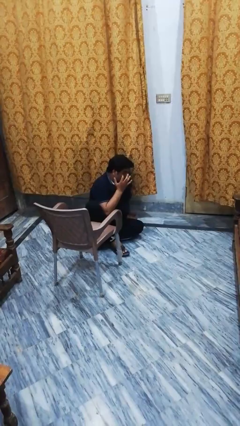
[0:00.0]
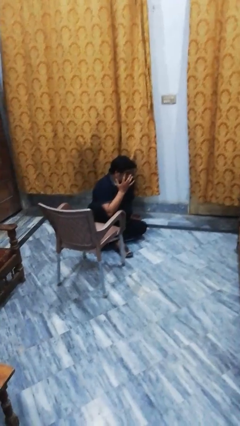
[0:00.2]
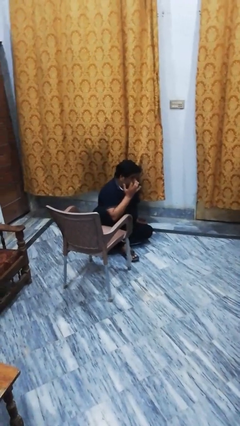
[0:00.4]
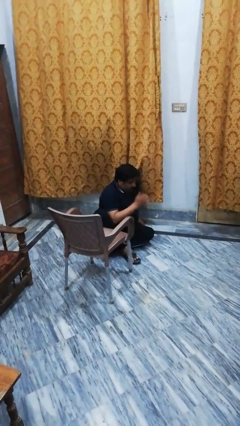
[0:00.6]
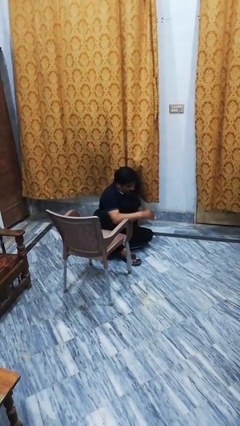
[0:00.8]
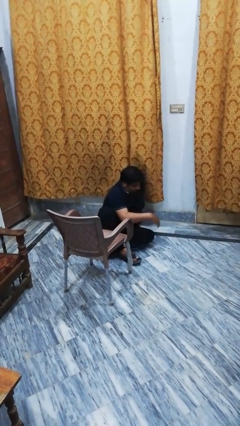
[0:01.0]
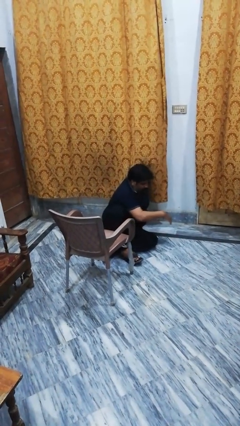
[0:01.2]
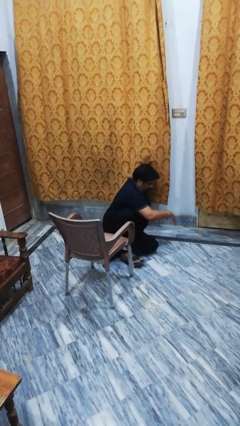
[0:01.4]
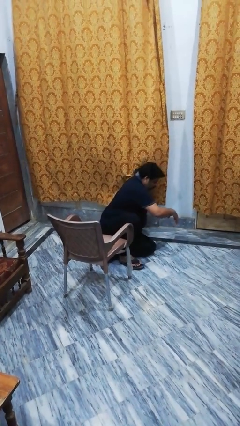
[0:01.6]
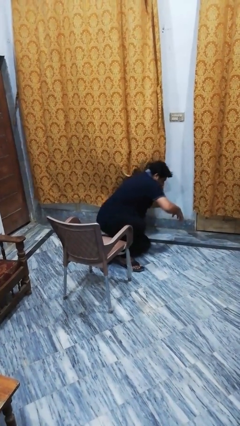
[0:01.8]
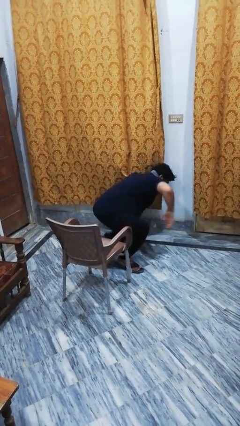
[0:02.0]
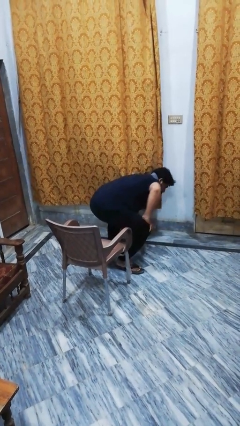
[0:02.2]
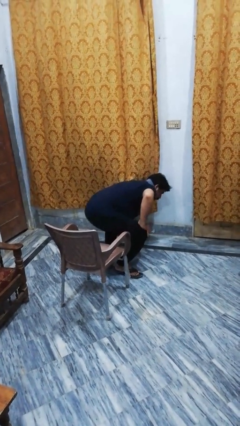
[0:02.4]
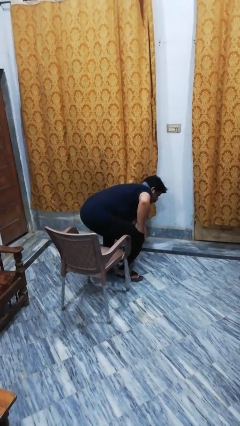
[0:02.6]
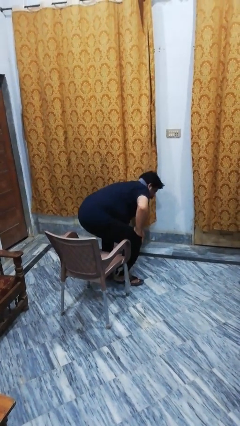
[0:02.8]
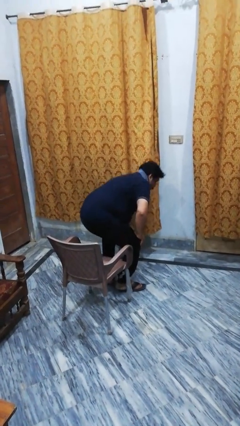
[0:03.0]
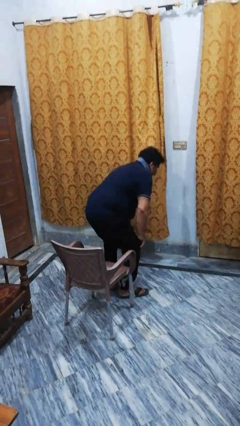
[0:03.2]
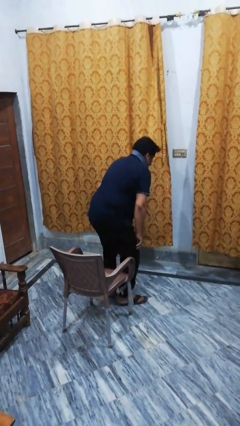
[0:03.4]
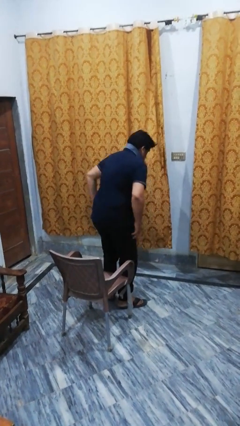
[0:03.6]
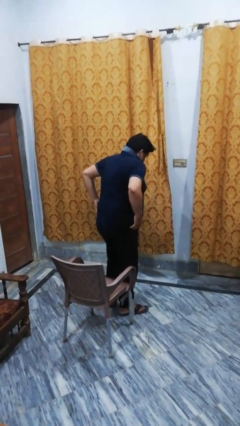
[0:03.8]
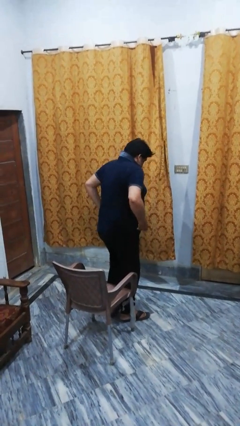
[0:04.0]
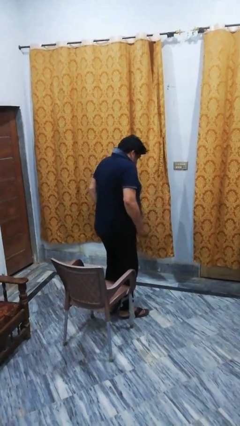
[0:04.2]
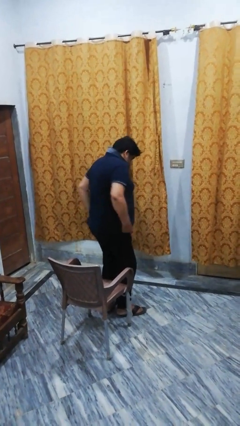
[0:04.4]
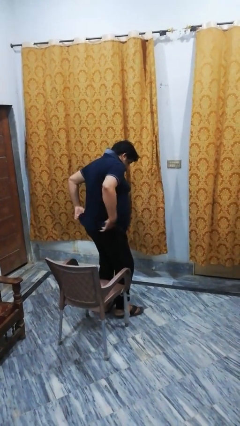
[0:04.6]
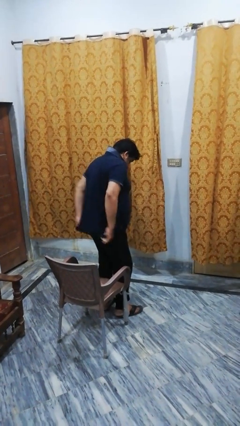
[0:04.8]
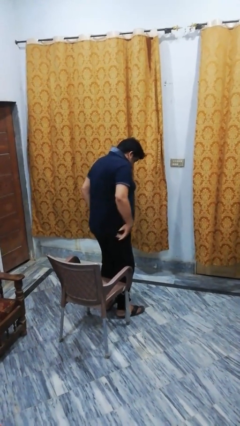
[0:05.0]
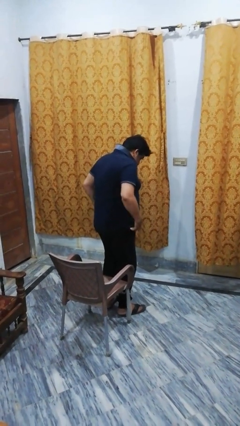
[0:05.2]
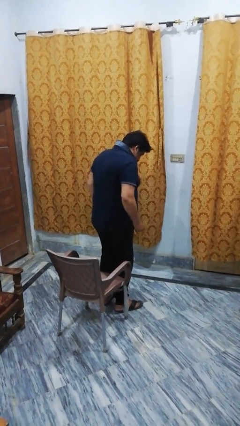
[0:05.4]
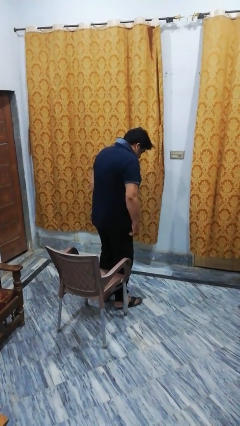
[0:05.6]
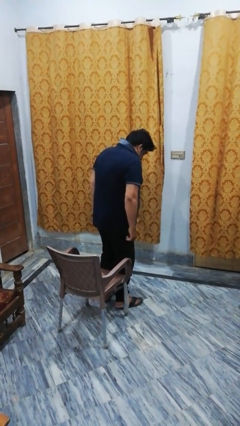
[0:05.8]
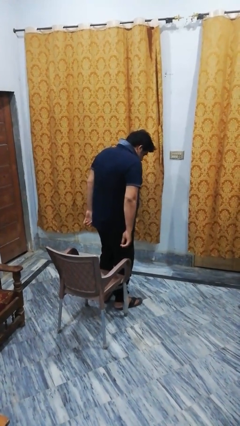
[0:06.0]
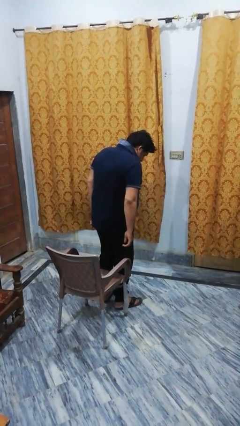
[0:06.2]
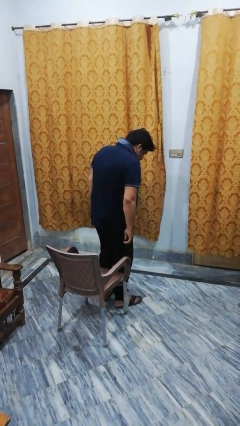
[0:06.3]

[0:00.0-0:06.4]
person stands up from floor

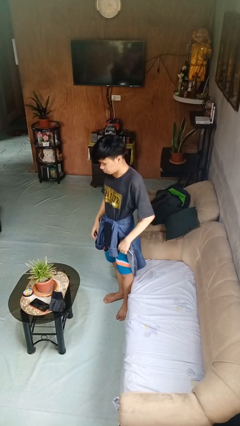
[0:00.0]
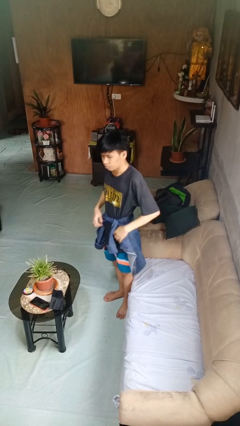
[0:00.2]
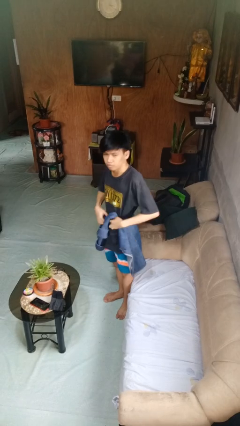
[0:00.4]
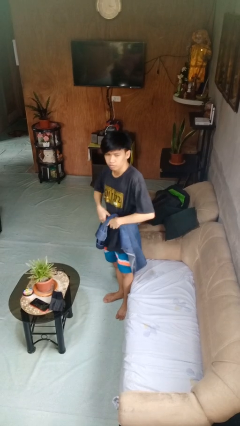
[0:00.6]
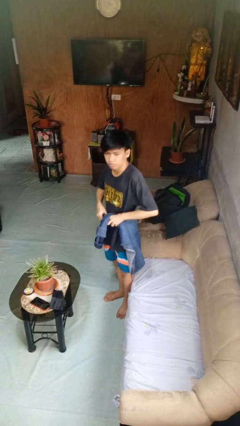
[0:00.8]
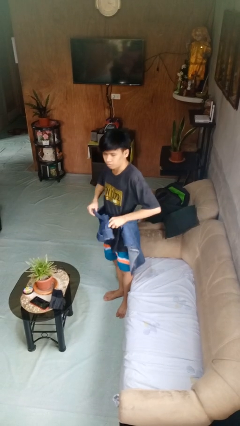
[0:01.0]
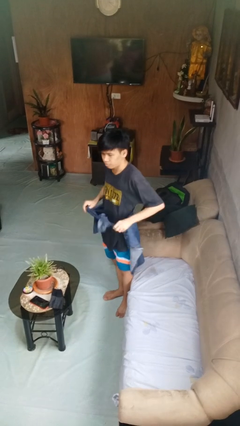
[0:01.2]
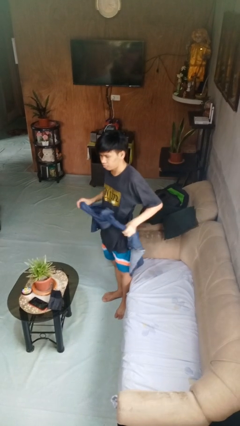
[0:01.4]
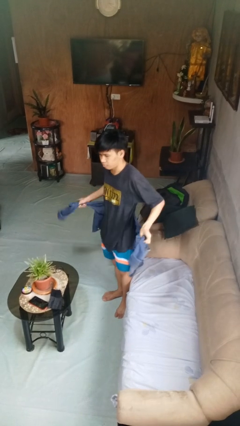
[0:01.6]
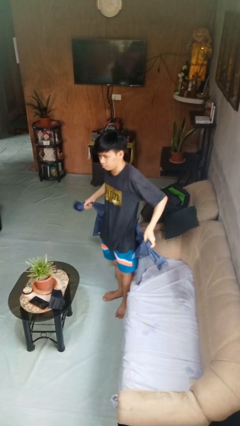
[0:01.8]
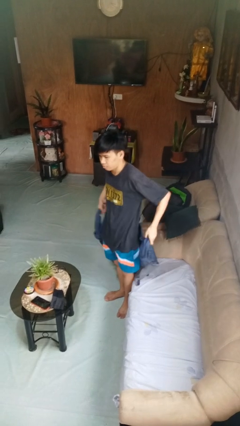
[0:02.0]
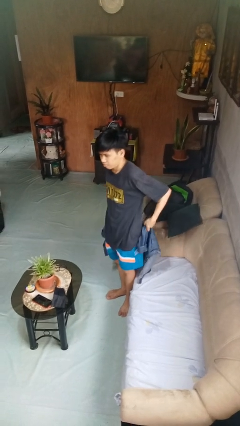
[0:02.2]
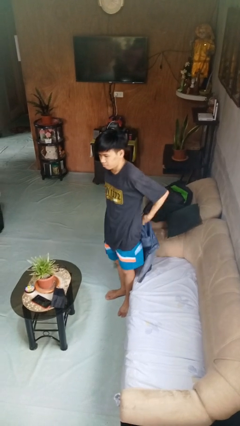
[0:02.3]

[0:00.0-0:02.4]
person unties jacket around waist

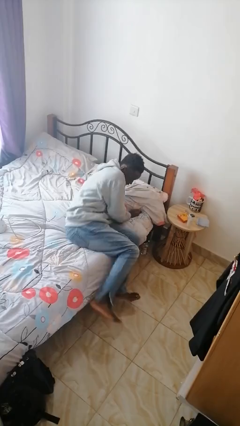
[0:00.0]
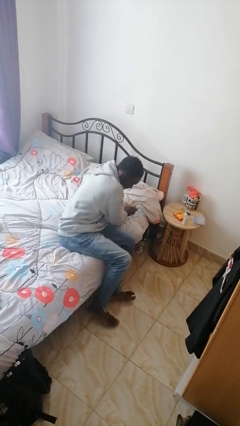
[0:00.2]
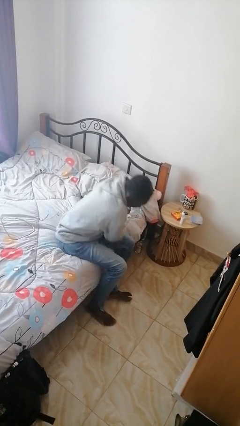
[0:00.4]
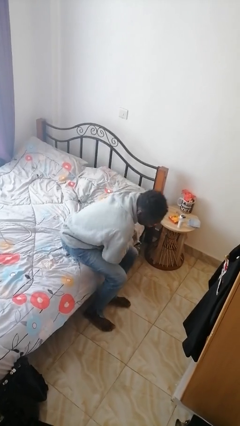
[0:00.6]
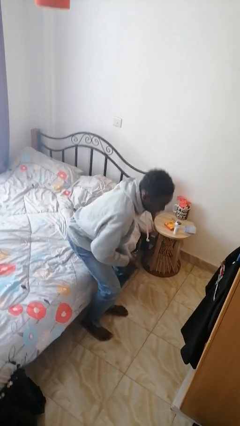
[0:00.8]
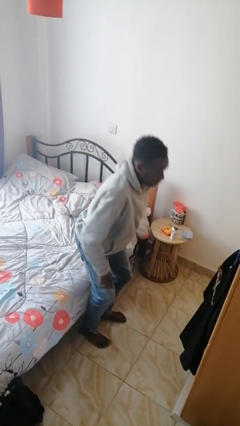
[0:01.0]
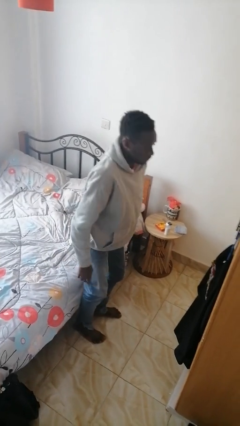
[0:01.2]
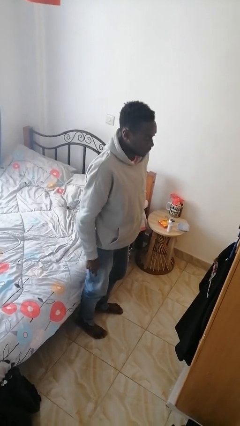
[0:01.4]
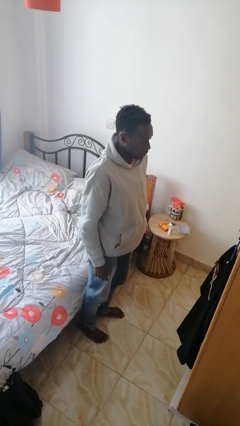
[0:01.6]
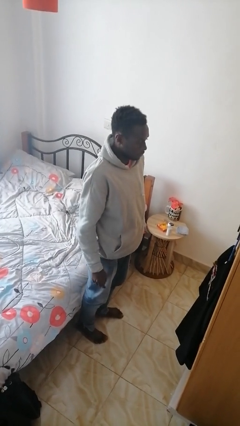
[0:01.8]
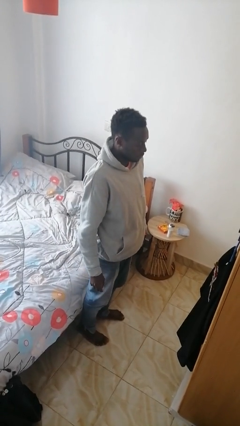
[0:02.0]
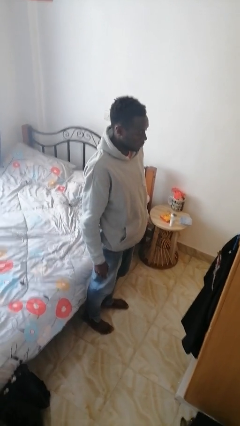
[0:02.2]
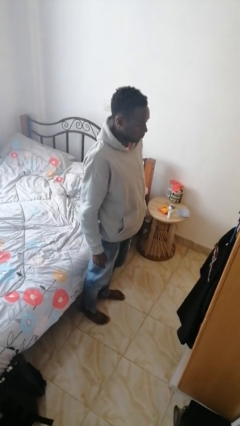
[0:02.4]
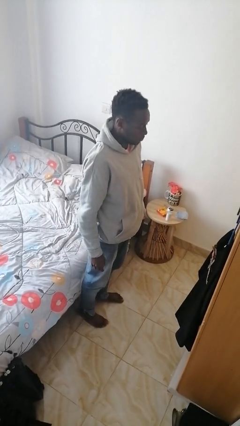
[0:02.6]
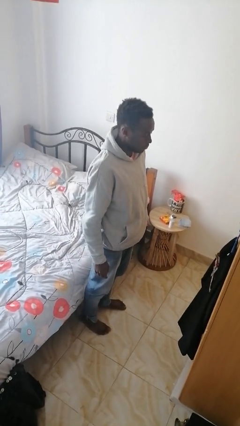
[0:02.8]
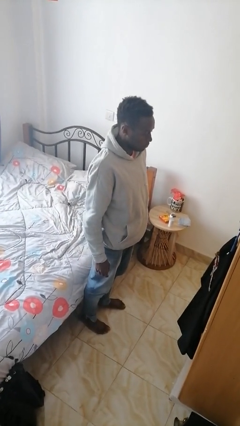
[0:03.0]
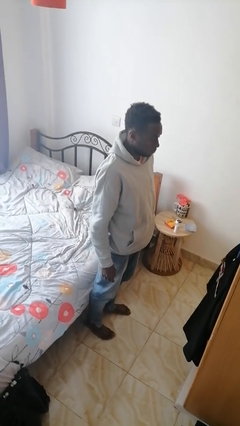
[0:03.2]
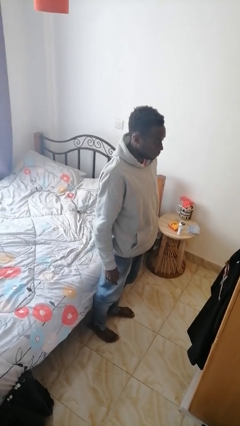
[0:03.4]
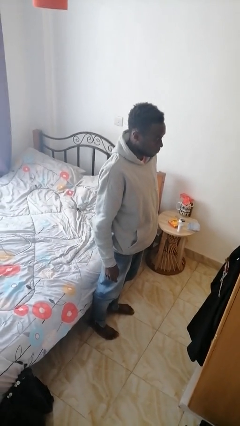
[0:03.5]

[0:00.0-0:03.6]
person stands up

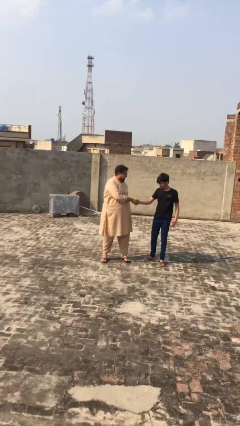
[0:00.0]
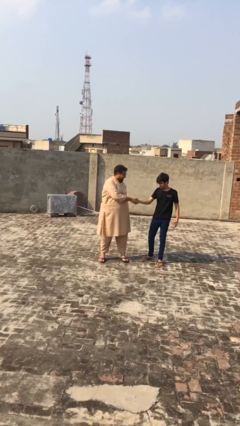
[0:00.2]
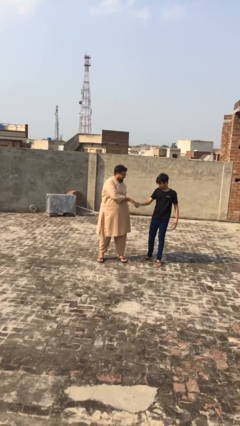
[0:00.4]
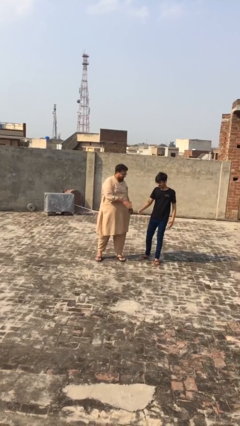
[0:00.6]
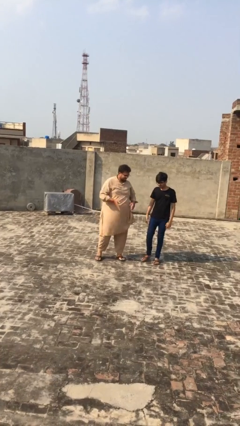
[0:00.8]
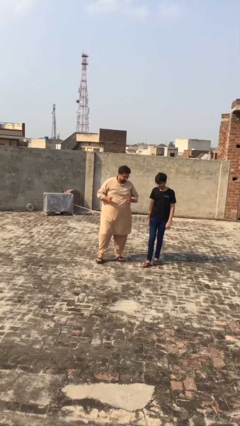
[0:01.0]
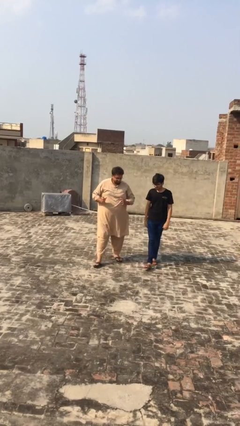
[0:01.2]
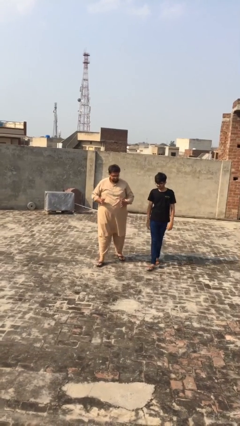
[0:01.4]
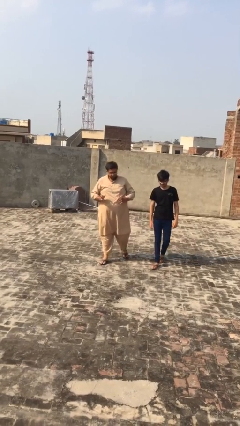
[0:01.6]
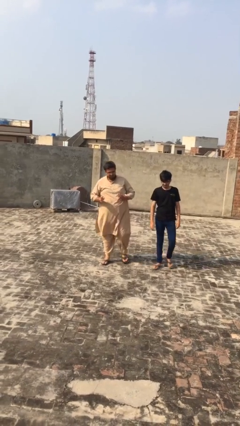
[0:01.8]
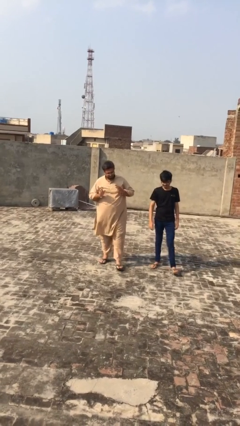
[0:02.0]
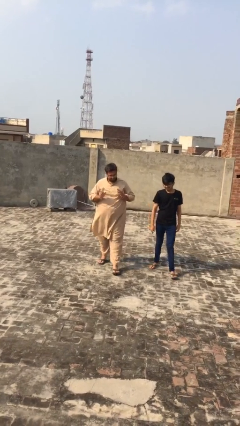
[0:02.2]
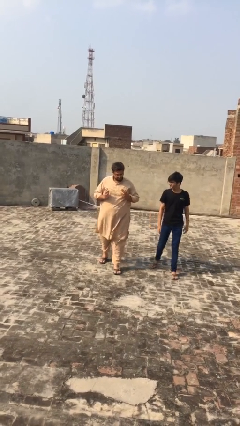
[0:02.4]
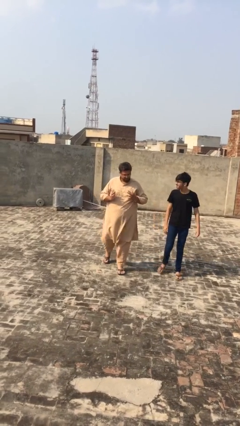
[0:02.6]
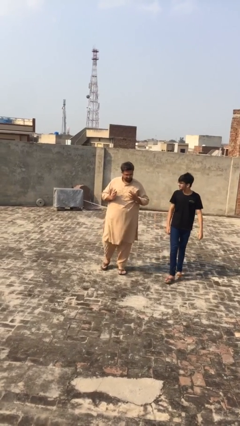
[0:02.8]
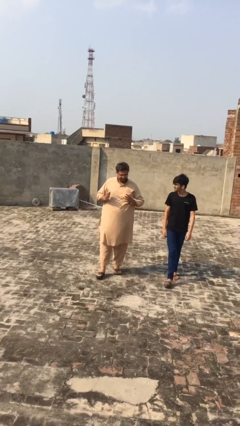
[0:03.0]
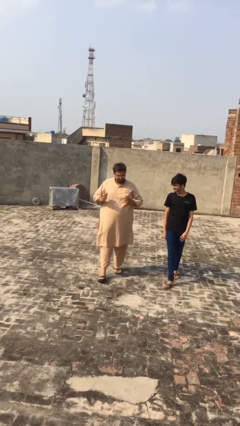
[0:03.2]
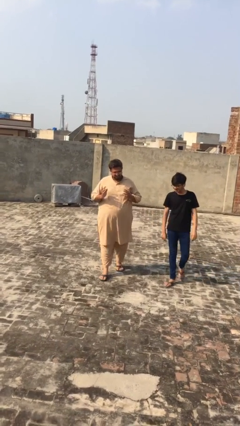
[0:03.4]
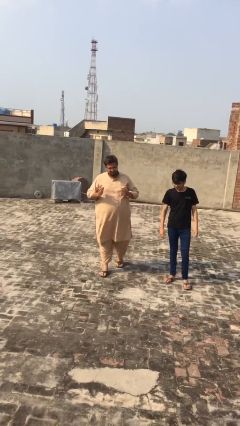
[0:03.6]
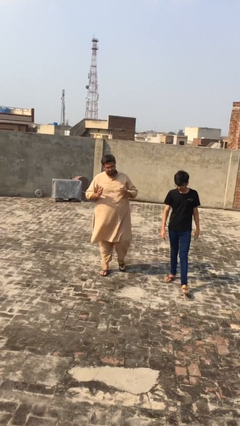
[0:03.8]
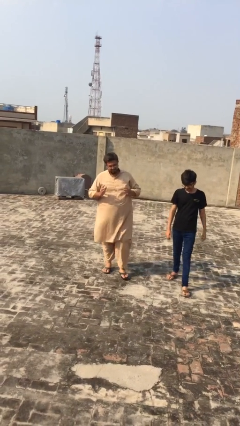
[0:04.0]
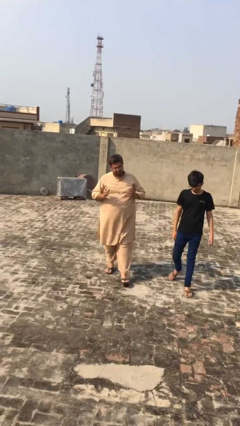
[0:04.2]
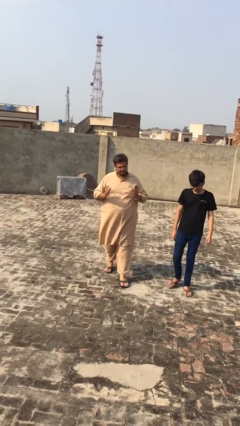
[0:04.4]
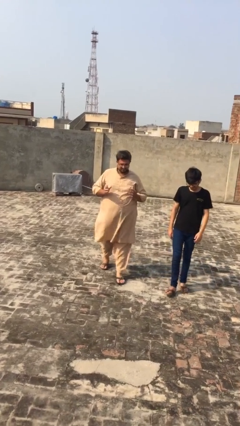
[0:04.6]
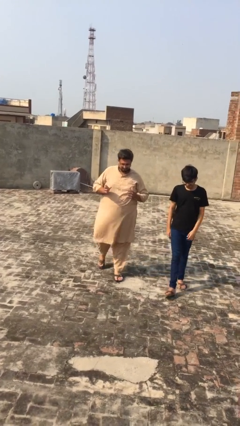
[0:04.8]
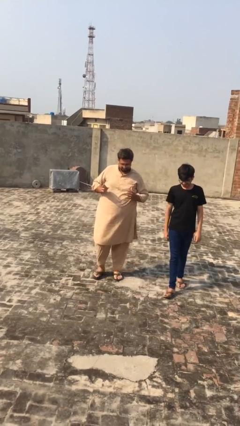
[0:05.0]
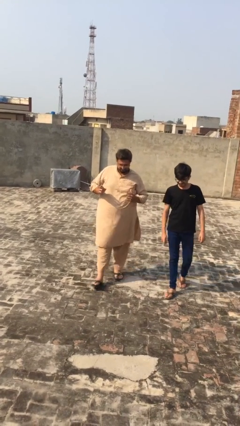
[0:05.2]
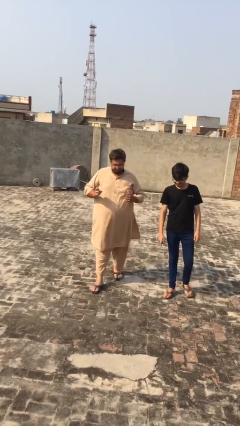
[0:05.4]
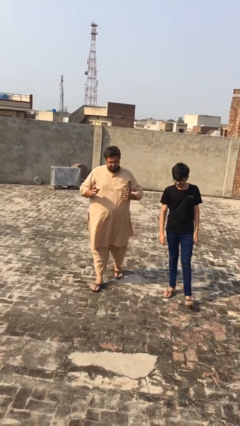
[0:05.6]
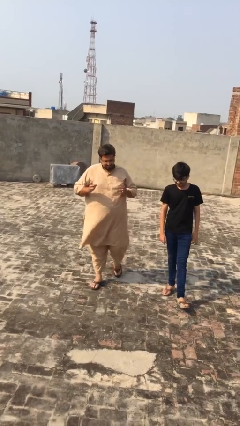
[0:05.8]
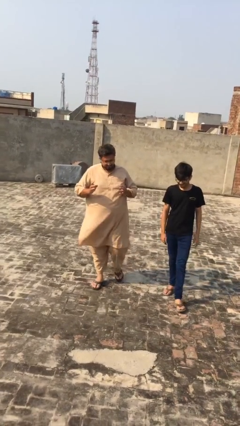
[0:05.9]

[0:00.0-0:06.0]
person talks to person
